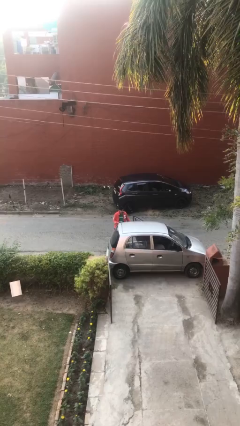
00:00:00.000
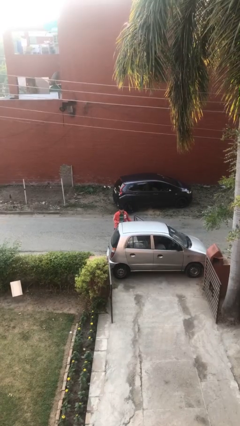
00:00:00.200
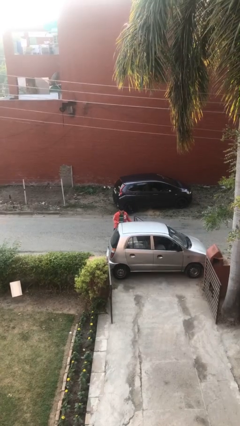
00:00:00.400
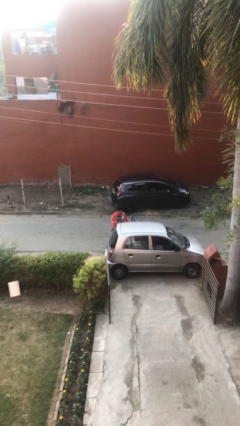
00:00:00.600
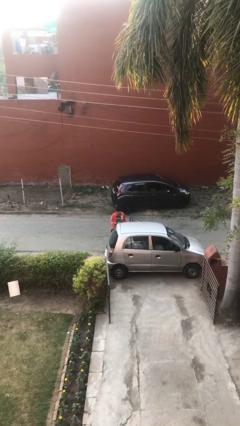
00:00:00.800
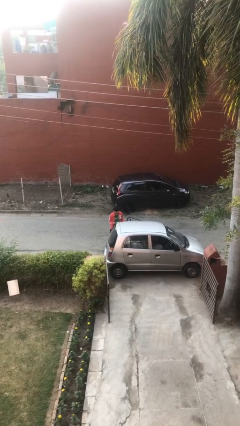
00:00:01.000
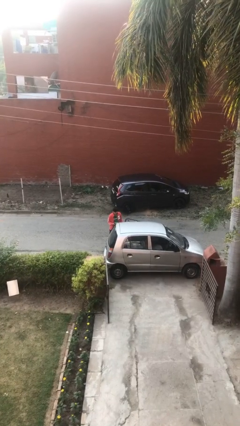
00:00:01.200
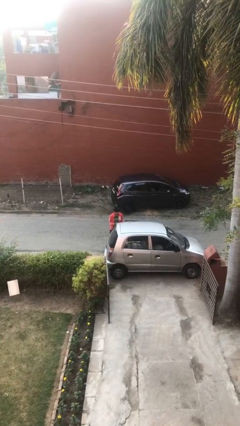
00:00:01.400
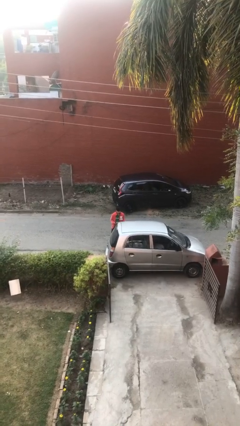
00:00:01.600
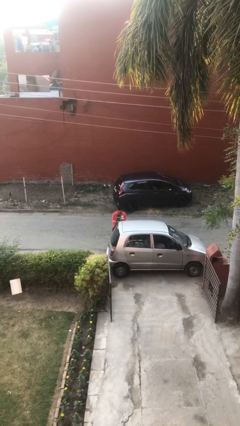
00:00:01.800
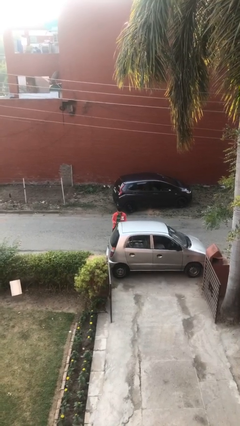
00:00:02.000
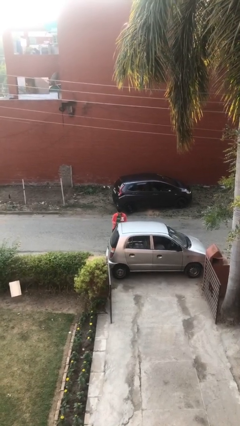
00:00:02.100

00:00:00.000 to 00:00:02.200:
person closes car door

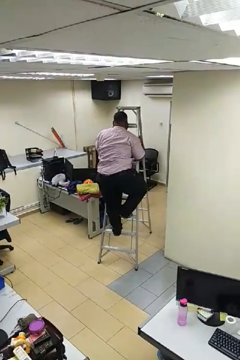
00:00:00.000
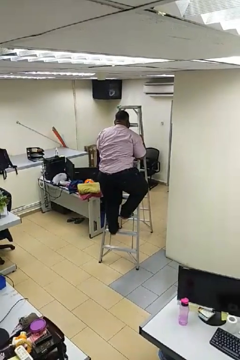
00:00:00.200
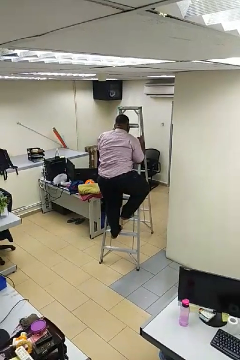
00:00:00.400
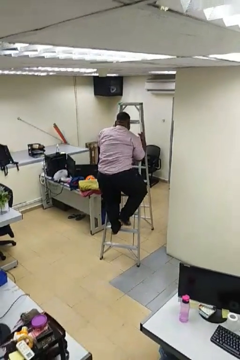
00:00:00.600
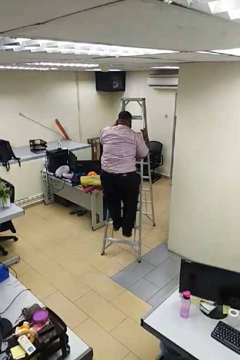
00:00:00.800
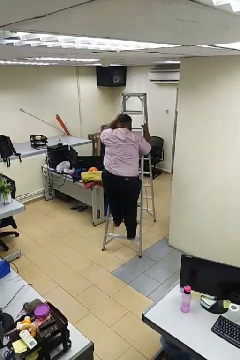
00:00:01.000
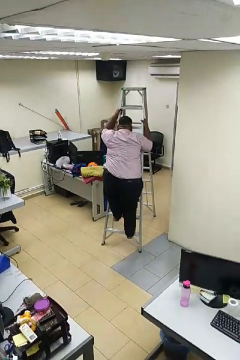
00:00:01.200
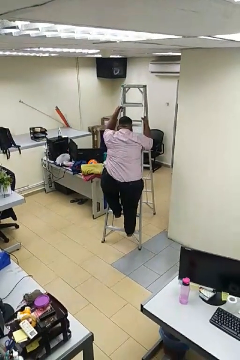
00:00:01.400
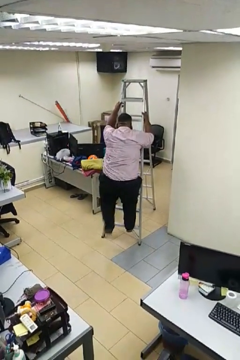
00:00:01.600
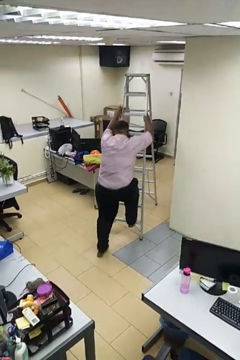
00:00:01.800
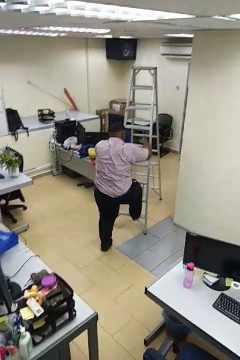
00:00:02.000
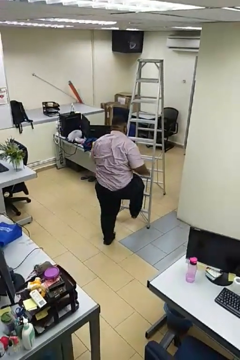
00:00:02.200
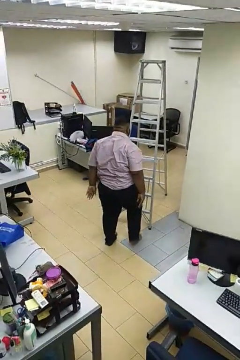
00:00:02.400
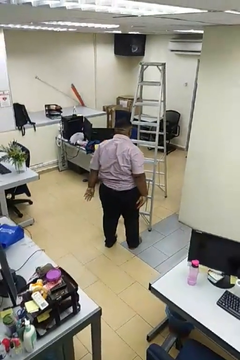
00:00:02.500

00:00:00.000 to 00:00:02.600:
person climbs down ladder

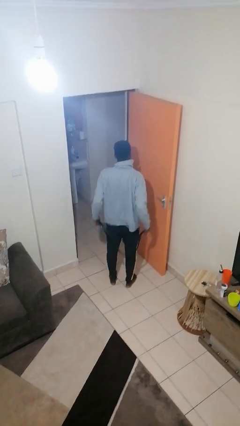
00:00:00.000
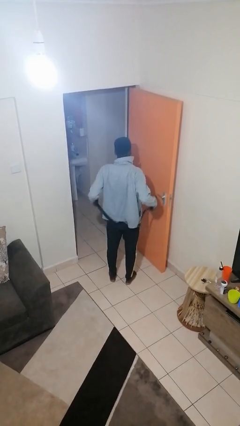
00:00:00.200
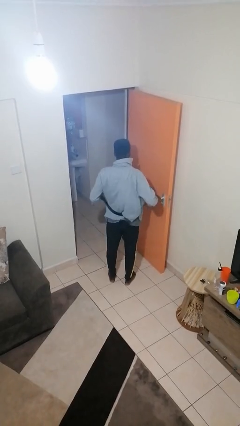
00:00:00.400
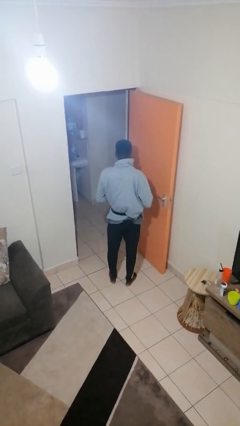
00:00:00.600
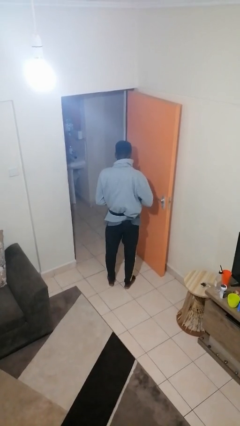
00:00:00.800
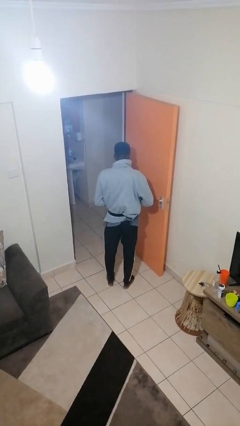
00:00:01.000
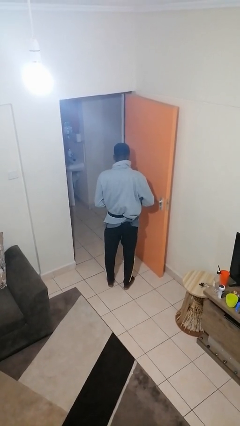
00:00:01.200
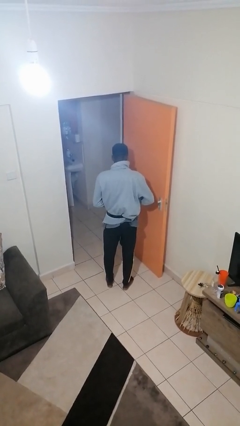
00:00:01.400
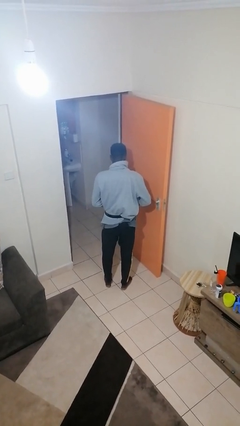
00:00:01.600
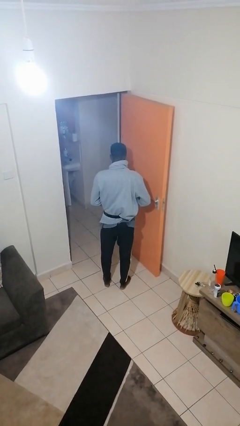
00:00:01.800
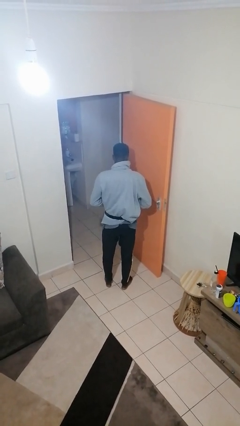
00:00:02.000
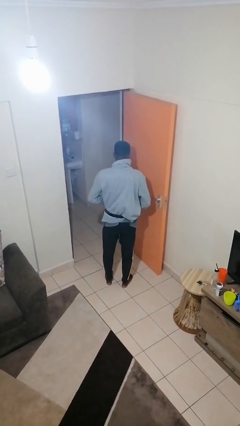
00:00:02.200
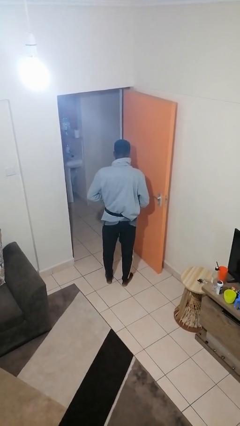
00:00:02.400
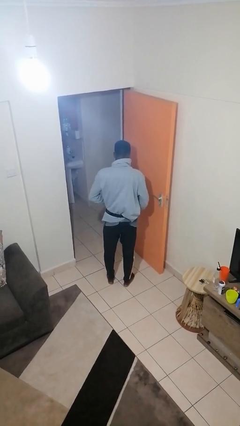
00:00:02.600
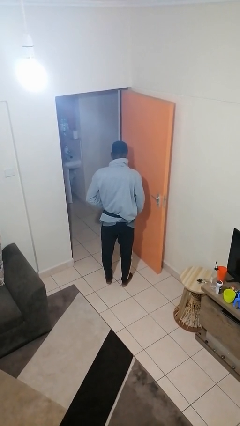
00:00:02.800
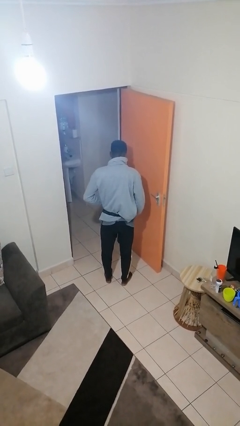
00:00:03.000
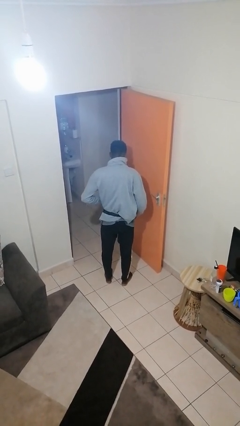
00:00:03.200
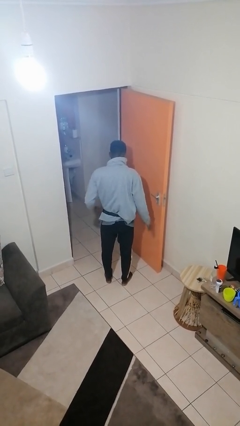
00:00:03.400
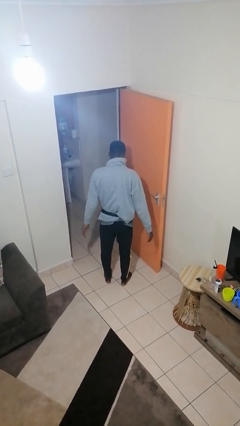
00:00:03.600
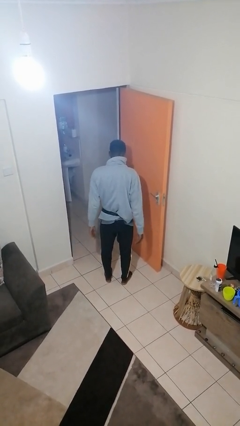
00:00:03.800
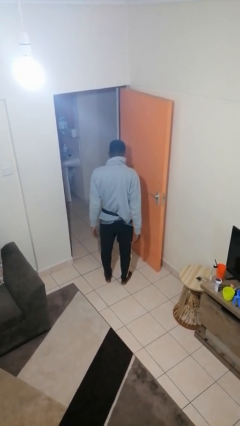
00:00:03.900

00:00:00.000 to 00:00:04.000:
person puts on belt

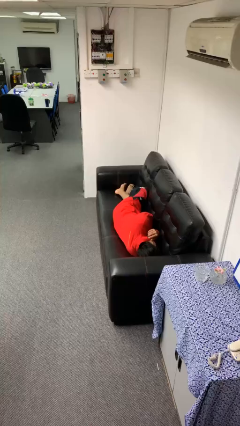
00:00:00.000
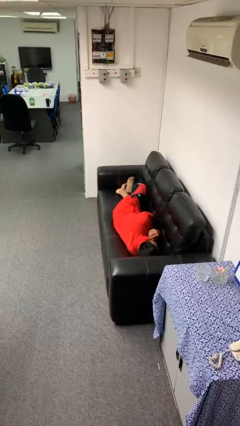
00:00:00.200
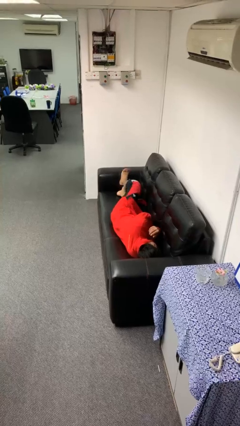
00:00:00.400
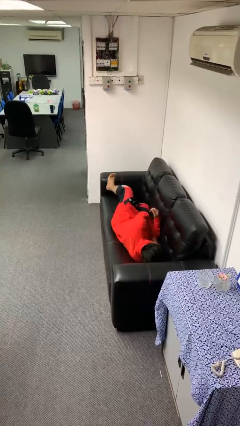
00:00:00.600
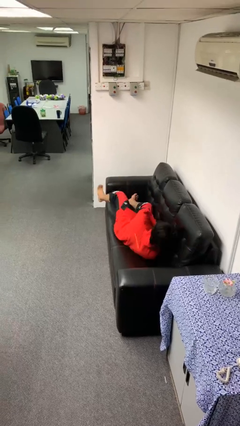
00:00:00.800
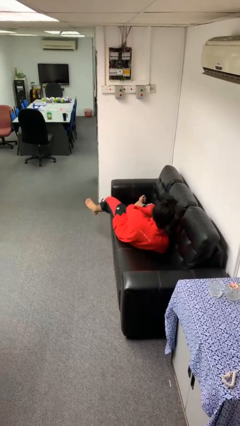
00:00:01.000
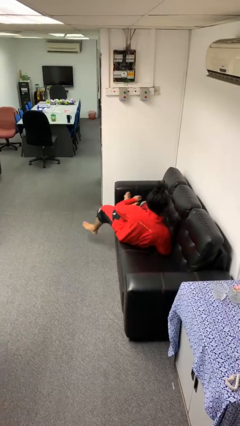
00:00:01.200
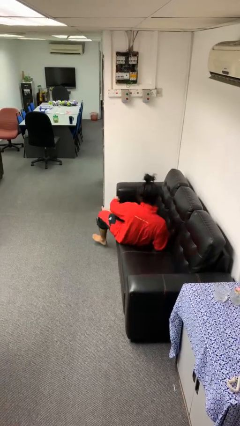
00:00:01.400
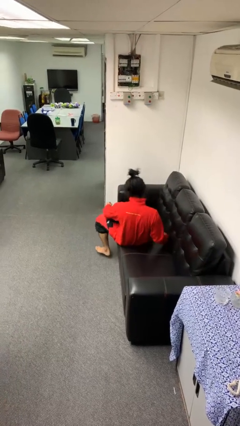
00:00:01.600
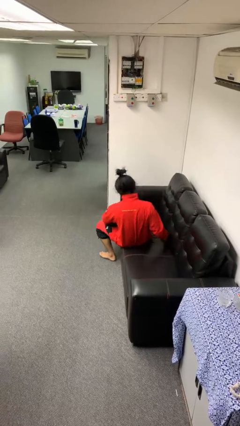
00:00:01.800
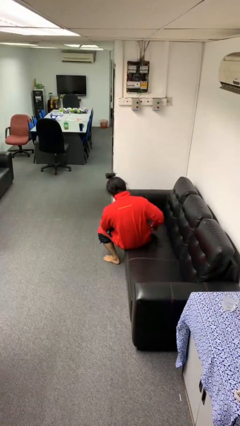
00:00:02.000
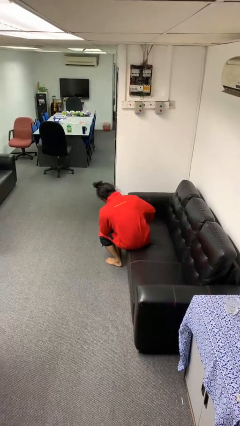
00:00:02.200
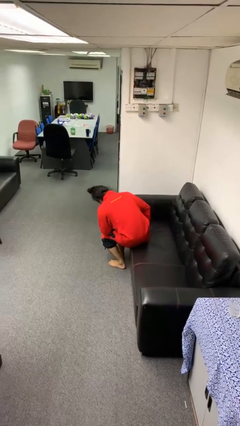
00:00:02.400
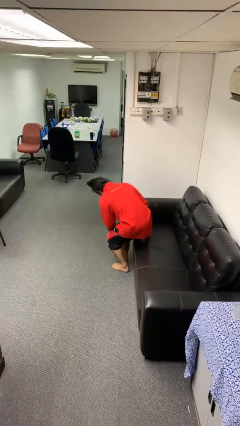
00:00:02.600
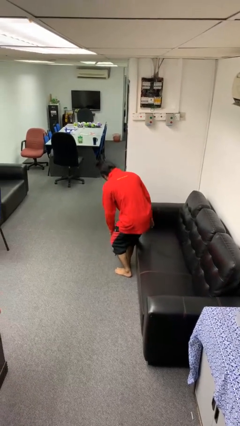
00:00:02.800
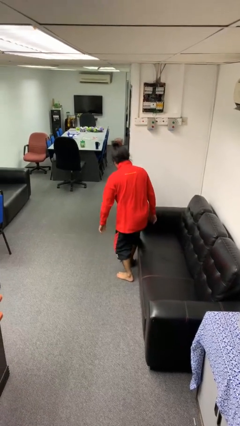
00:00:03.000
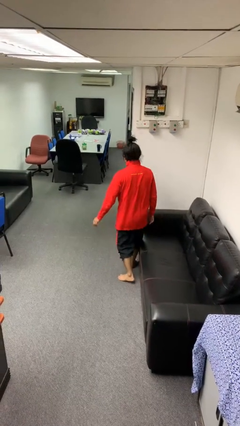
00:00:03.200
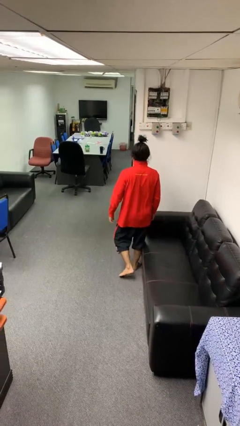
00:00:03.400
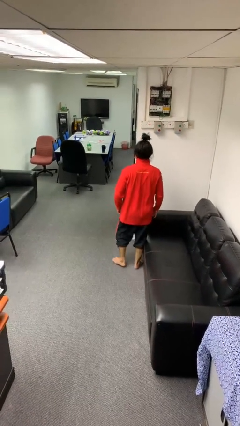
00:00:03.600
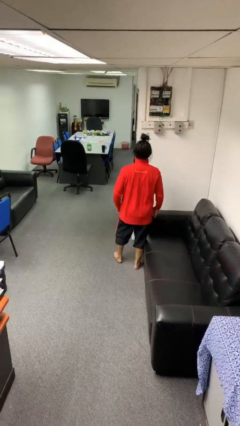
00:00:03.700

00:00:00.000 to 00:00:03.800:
person stands up

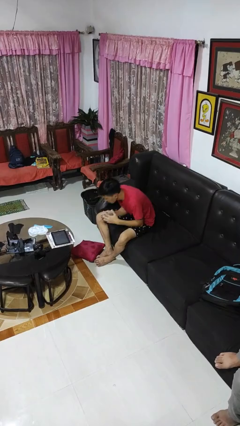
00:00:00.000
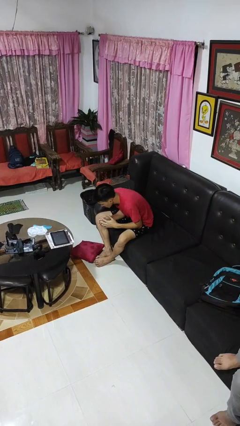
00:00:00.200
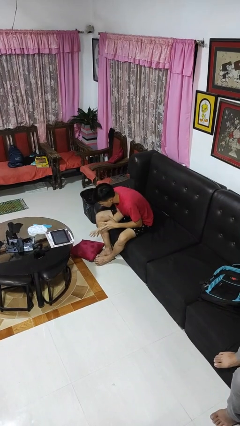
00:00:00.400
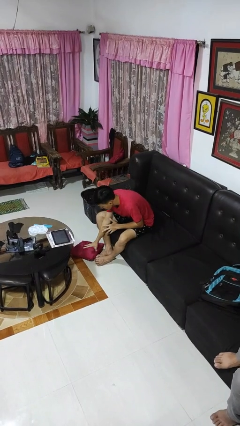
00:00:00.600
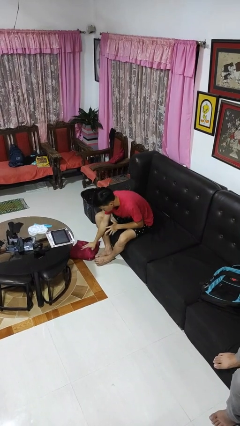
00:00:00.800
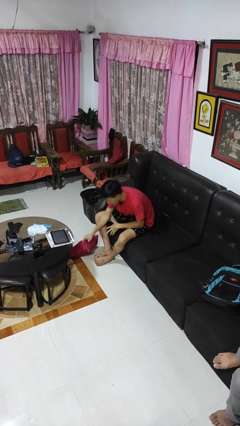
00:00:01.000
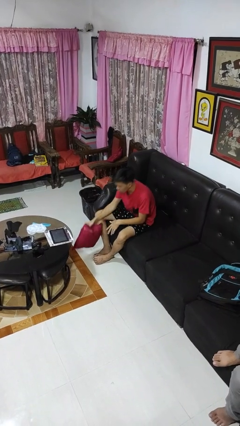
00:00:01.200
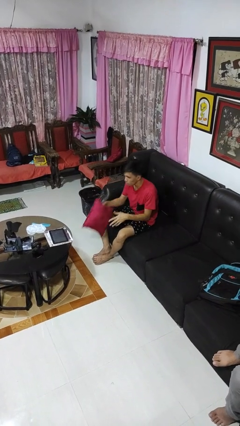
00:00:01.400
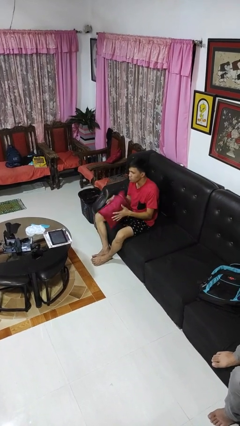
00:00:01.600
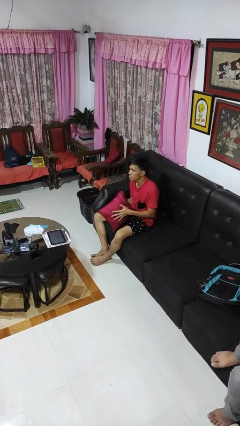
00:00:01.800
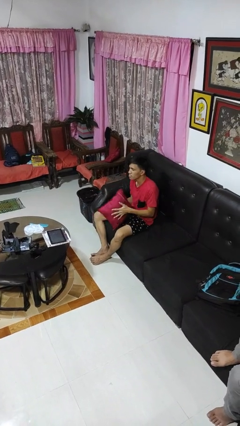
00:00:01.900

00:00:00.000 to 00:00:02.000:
person picks up object from floor

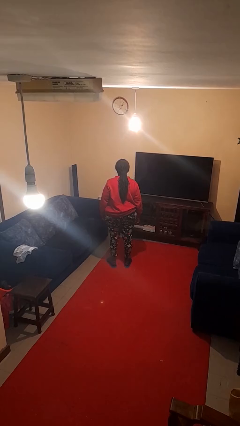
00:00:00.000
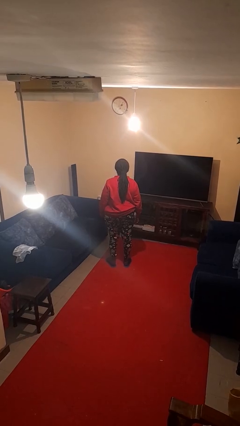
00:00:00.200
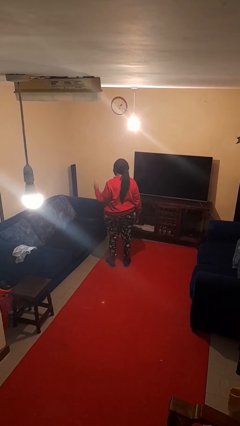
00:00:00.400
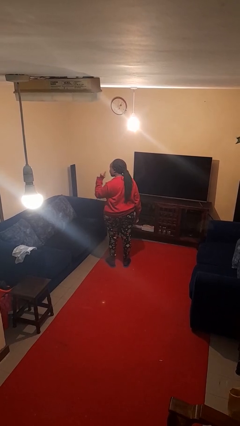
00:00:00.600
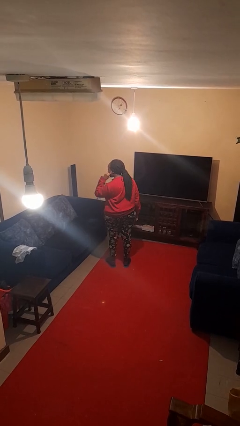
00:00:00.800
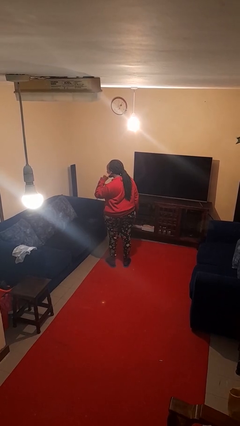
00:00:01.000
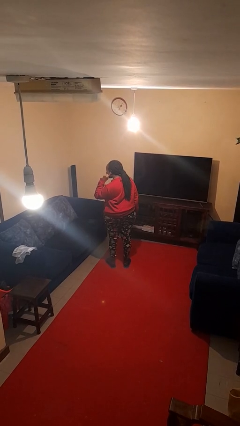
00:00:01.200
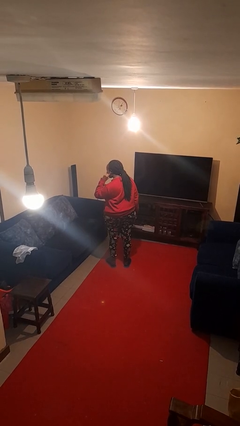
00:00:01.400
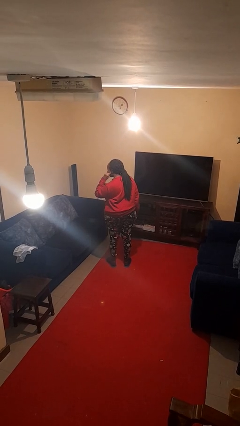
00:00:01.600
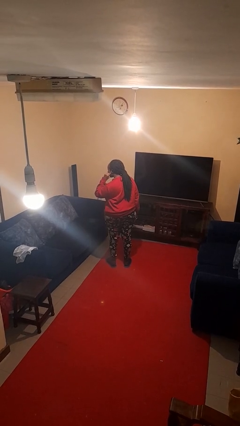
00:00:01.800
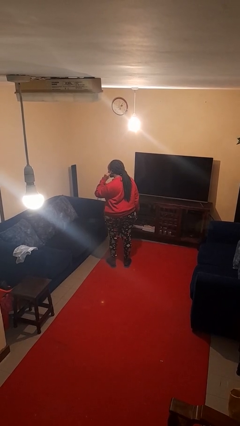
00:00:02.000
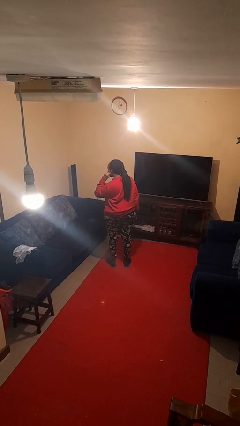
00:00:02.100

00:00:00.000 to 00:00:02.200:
person gestures listen closely

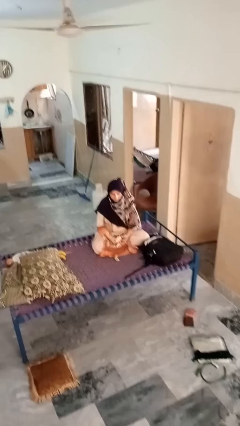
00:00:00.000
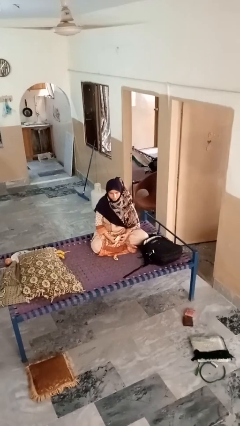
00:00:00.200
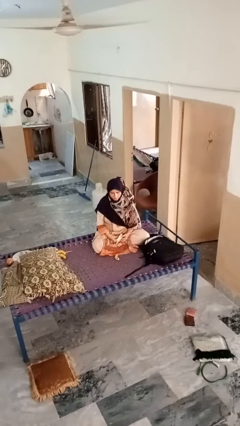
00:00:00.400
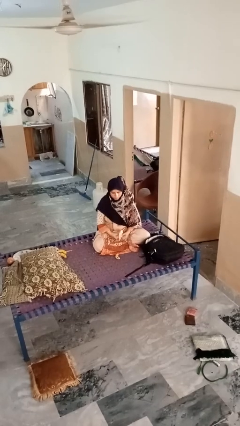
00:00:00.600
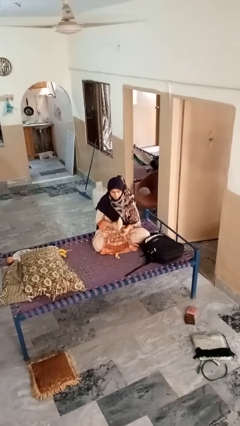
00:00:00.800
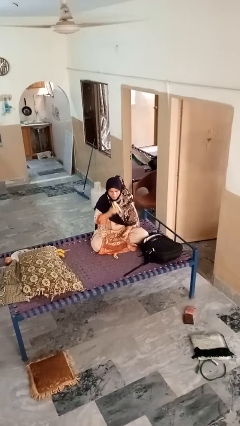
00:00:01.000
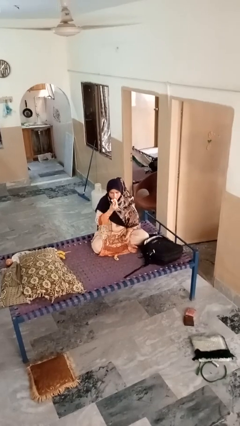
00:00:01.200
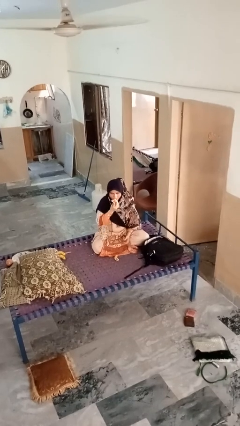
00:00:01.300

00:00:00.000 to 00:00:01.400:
person eats banana
